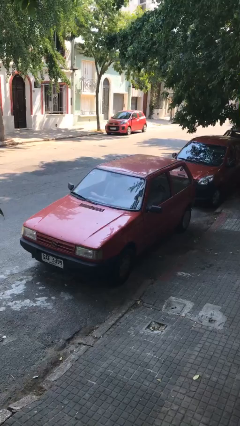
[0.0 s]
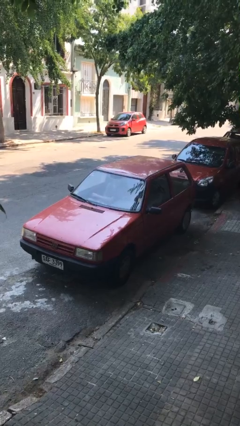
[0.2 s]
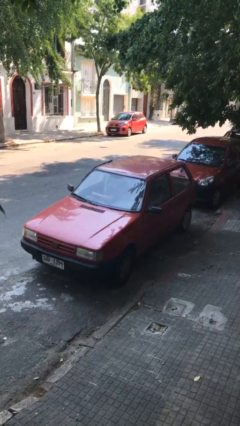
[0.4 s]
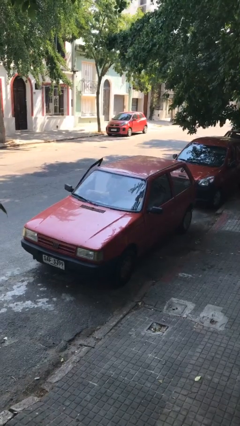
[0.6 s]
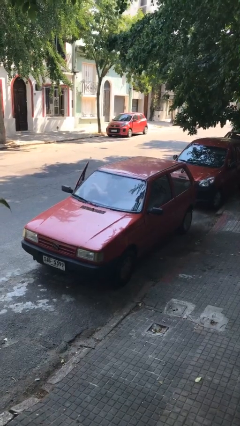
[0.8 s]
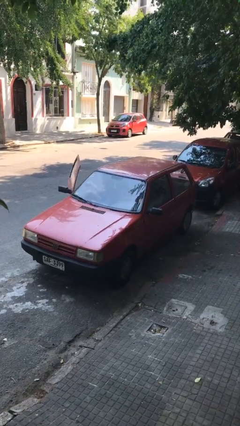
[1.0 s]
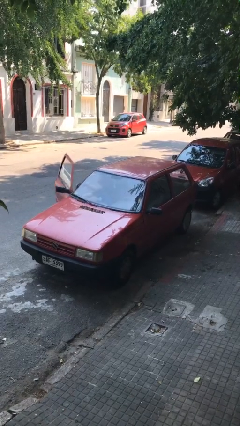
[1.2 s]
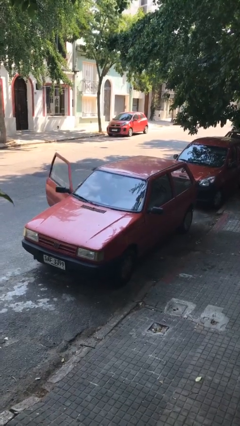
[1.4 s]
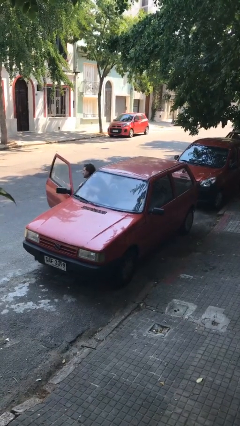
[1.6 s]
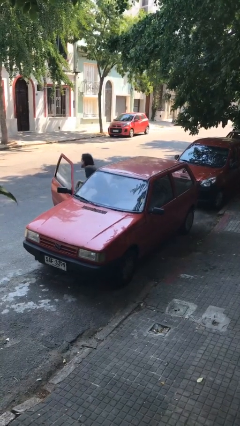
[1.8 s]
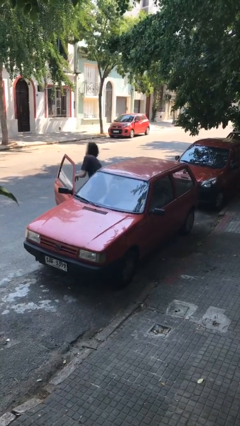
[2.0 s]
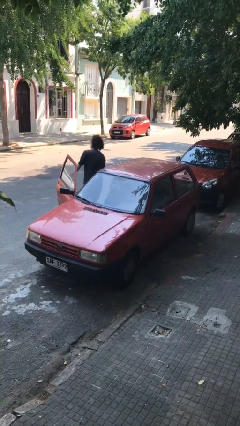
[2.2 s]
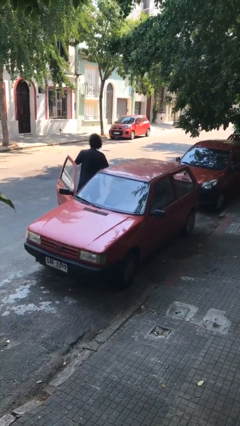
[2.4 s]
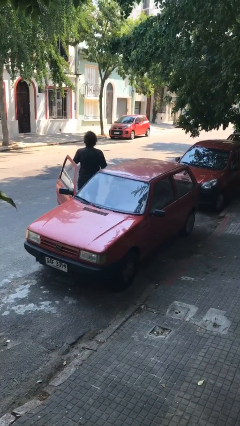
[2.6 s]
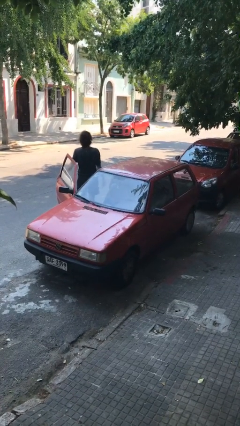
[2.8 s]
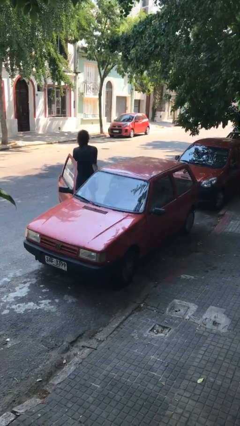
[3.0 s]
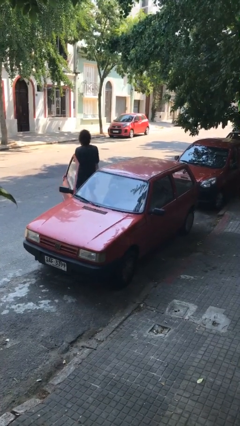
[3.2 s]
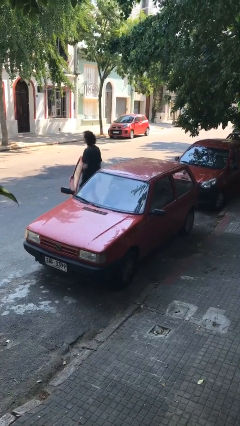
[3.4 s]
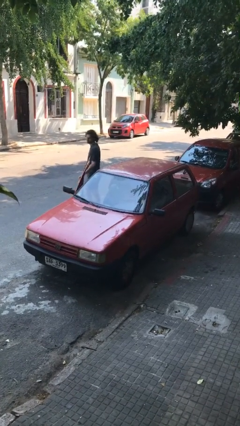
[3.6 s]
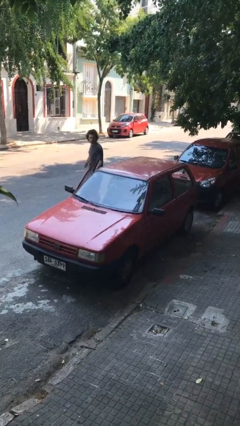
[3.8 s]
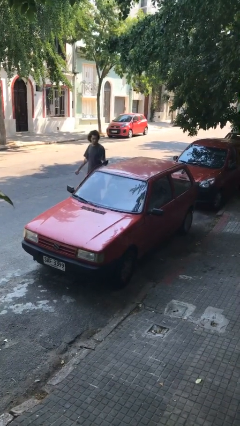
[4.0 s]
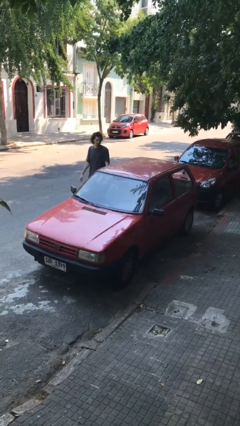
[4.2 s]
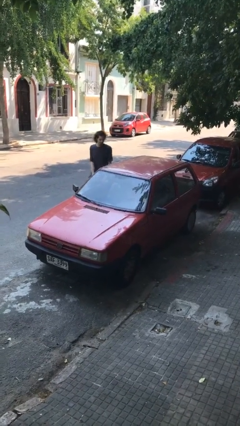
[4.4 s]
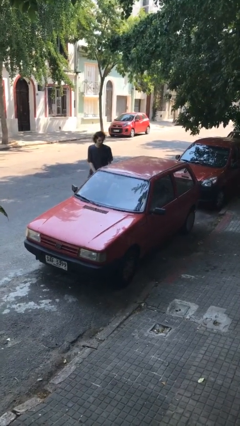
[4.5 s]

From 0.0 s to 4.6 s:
car drops off person

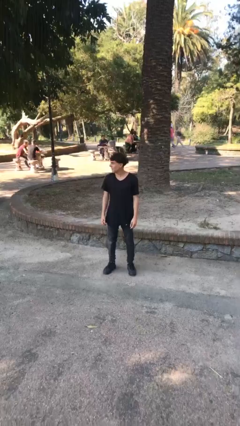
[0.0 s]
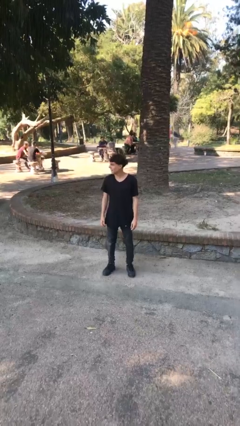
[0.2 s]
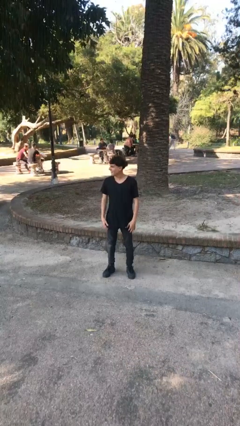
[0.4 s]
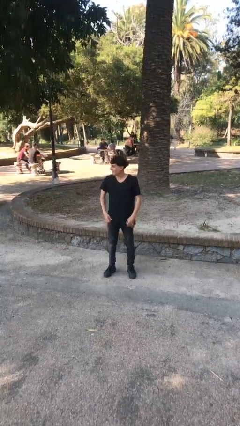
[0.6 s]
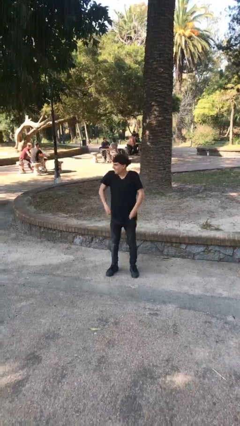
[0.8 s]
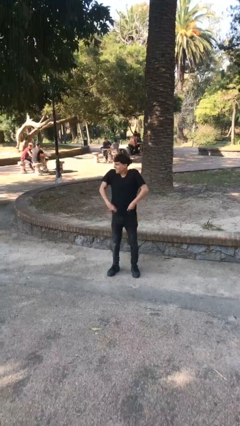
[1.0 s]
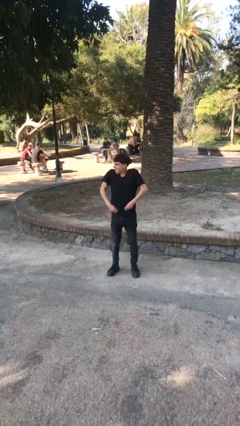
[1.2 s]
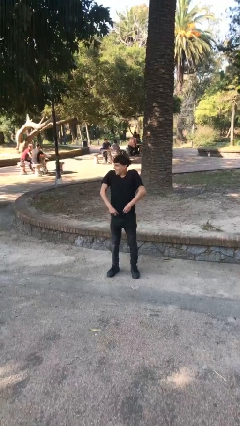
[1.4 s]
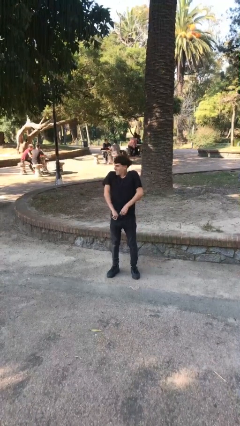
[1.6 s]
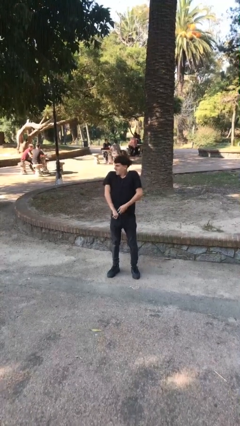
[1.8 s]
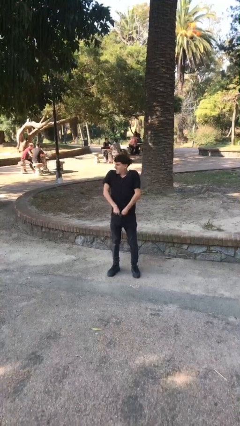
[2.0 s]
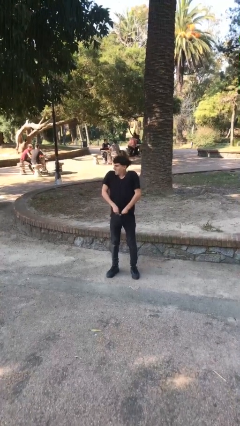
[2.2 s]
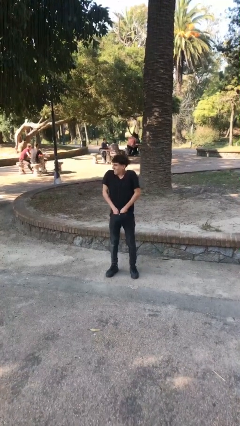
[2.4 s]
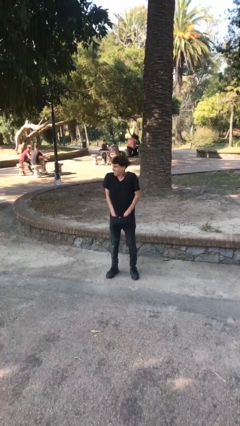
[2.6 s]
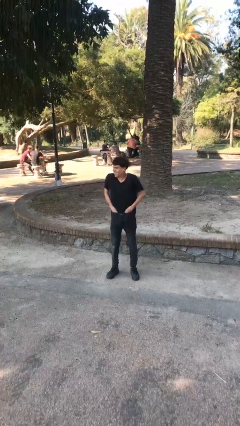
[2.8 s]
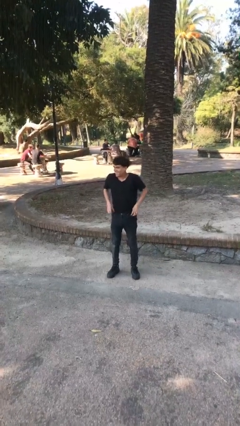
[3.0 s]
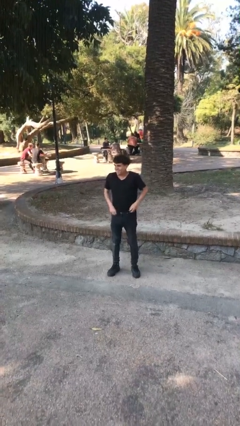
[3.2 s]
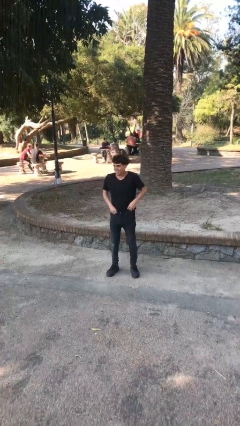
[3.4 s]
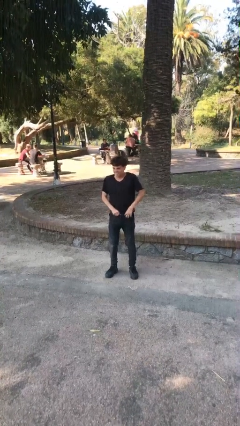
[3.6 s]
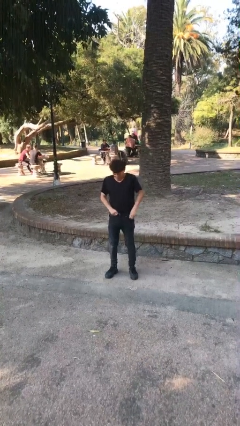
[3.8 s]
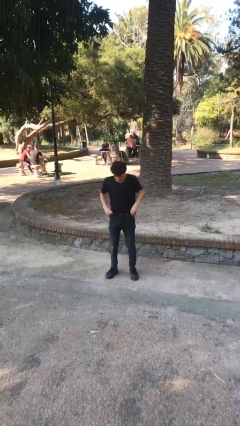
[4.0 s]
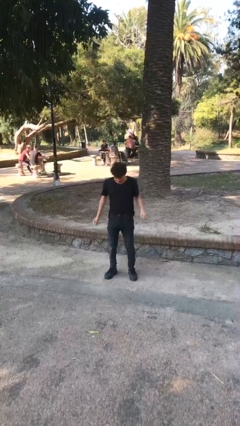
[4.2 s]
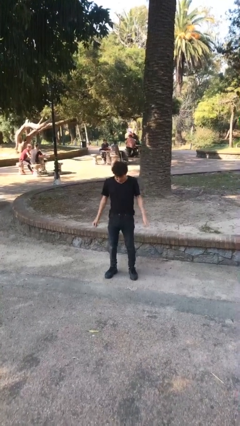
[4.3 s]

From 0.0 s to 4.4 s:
person tucks in shirt

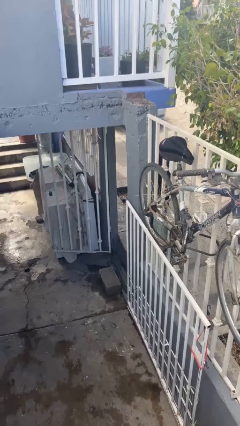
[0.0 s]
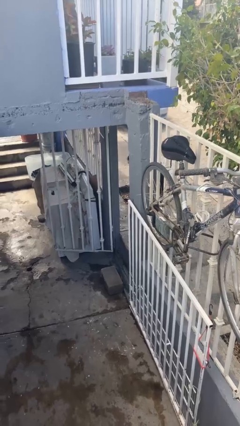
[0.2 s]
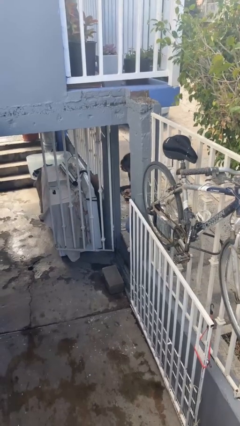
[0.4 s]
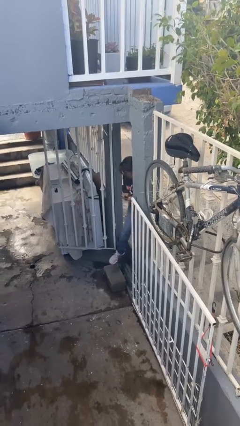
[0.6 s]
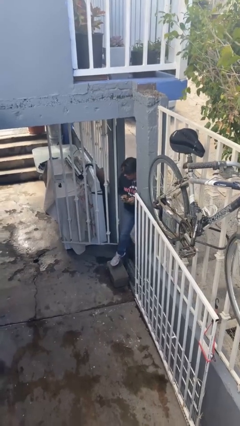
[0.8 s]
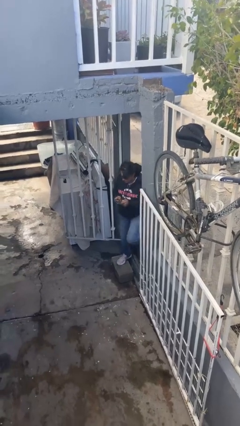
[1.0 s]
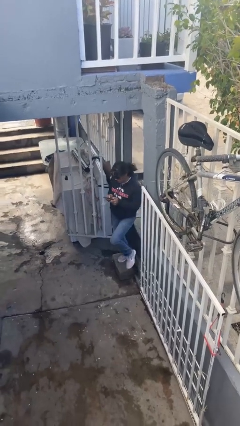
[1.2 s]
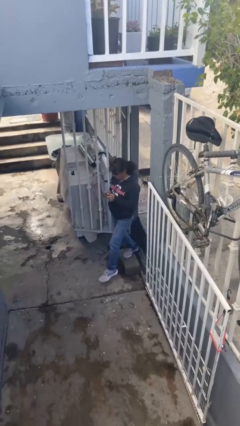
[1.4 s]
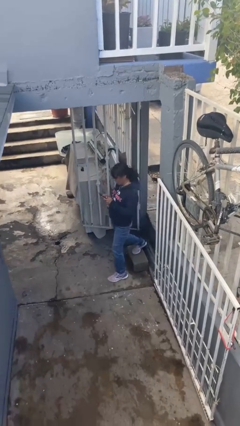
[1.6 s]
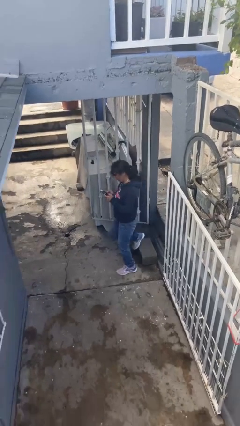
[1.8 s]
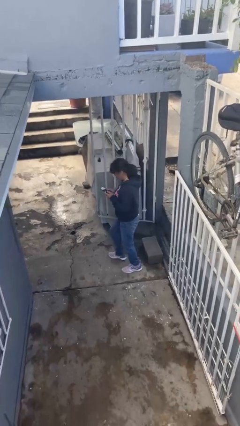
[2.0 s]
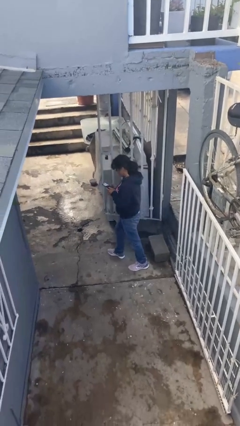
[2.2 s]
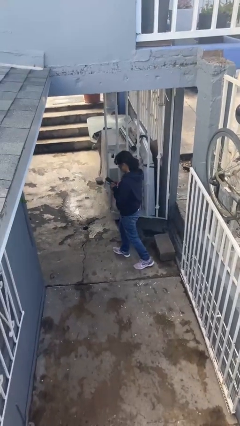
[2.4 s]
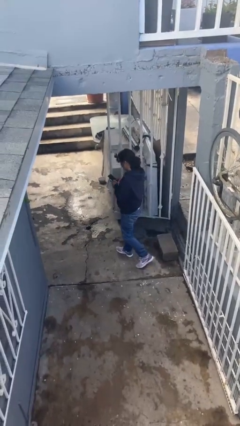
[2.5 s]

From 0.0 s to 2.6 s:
person enters scene through structure

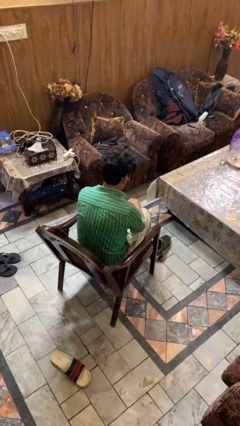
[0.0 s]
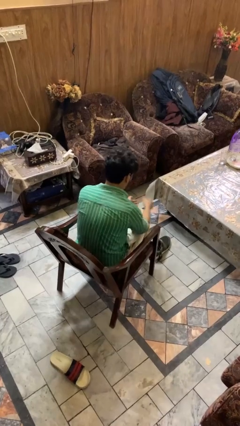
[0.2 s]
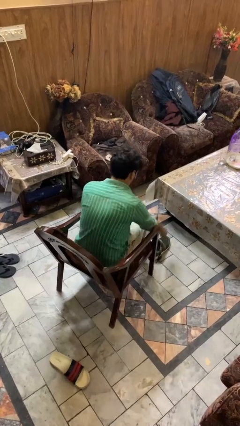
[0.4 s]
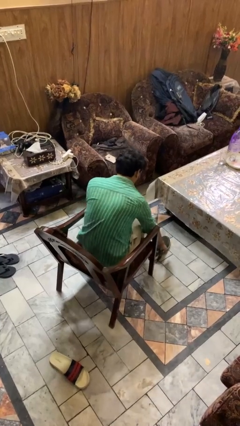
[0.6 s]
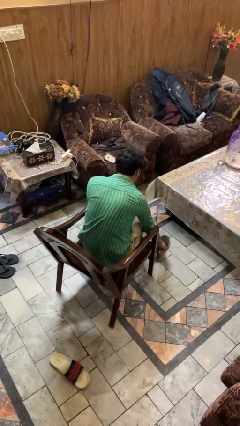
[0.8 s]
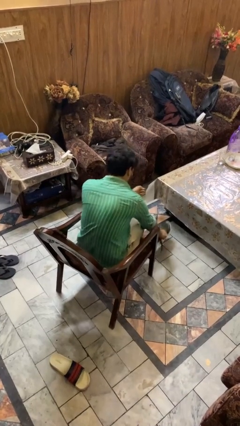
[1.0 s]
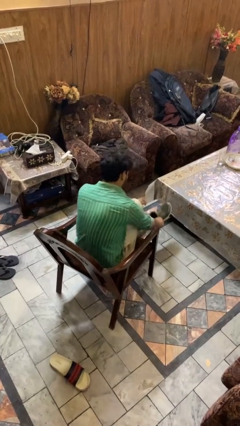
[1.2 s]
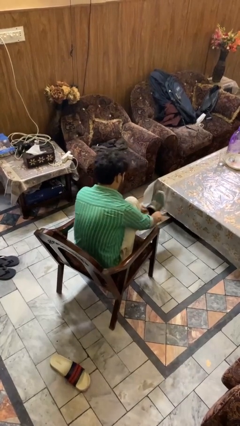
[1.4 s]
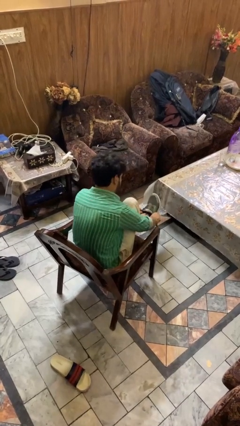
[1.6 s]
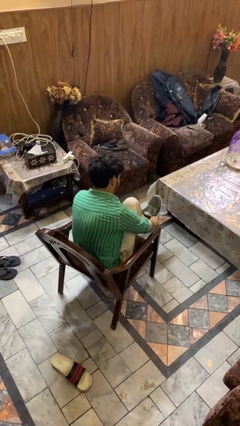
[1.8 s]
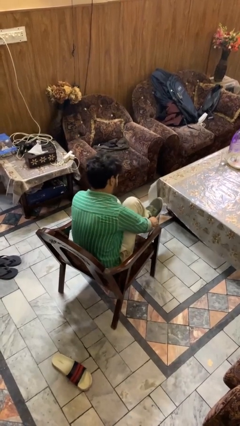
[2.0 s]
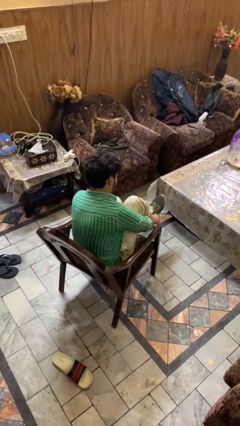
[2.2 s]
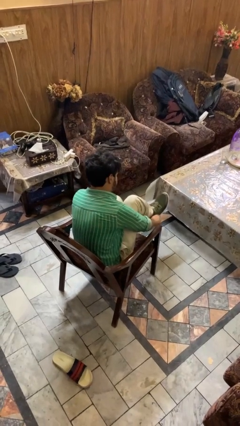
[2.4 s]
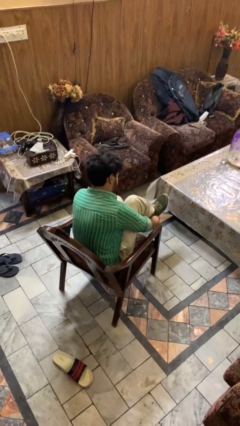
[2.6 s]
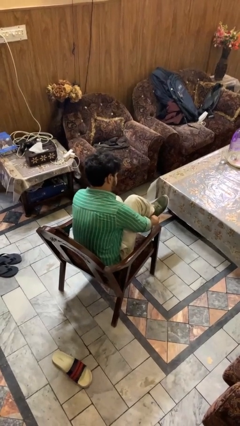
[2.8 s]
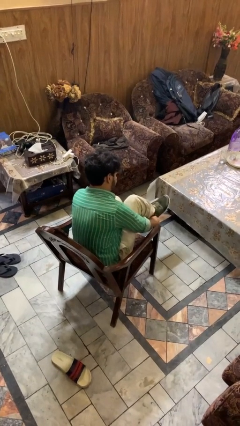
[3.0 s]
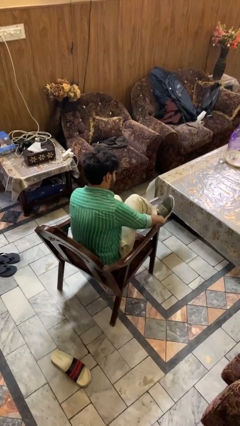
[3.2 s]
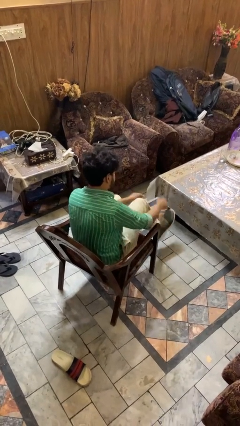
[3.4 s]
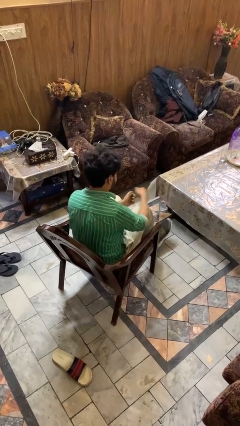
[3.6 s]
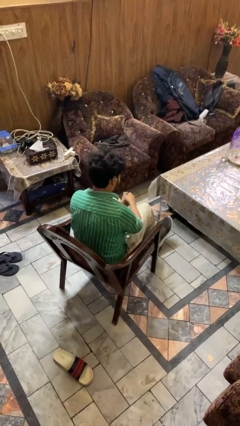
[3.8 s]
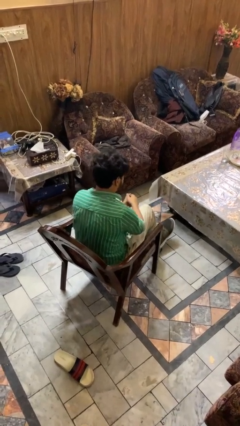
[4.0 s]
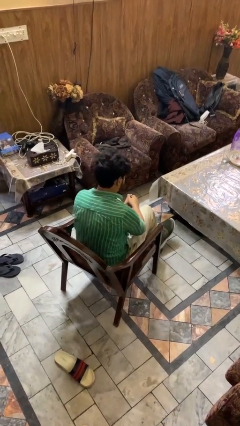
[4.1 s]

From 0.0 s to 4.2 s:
person puts on shoes

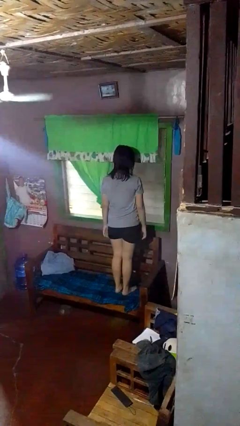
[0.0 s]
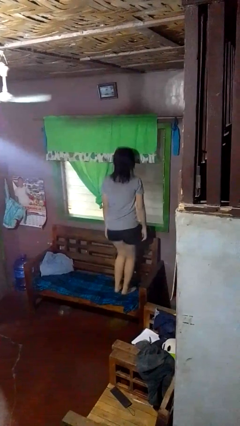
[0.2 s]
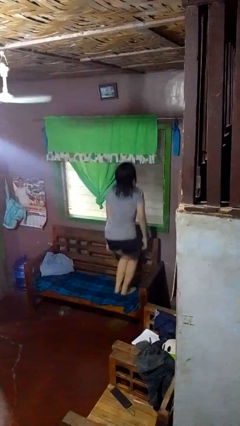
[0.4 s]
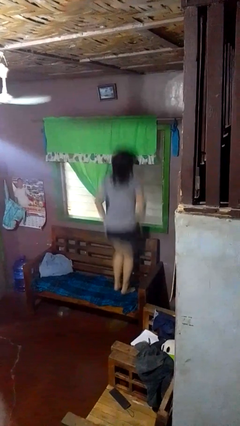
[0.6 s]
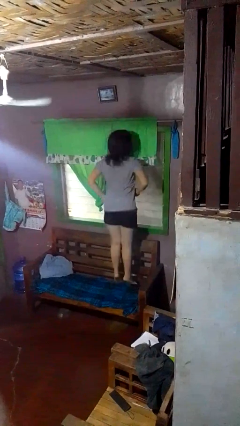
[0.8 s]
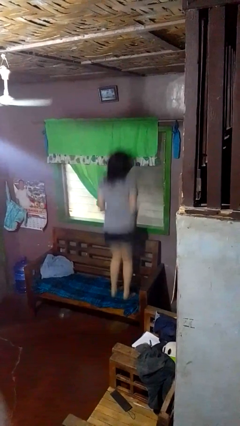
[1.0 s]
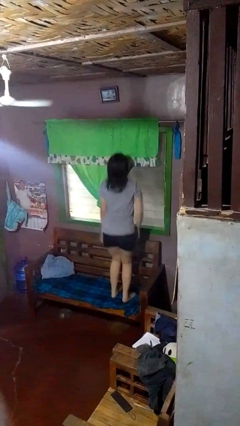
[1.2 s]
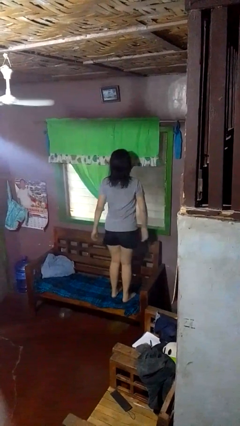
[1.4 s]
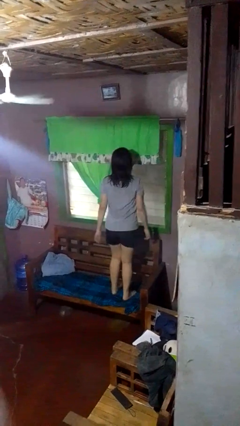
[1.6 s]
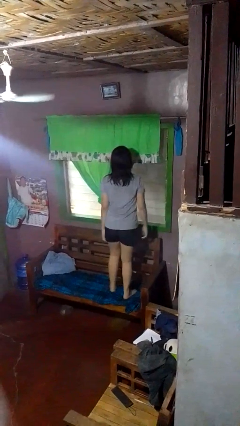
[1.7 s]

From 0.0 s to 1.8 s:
person jumps on couch

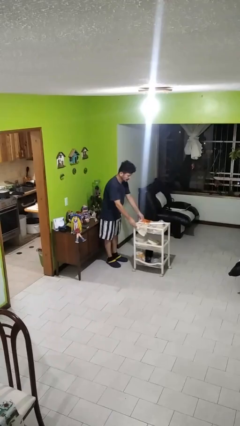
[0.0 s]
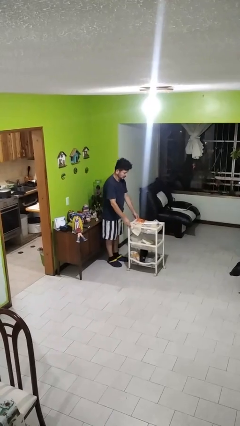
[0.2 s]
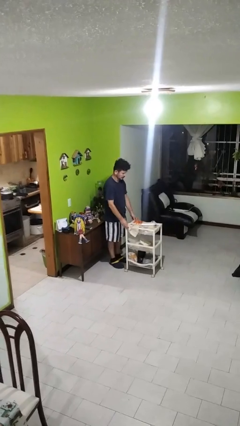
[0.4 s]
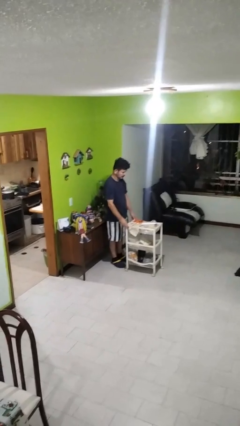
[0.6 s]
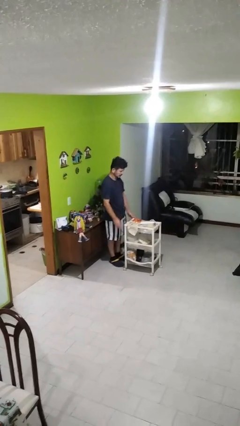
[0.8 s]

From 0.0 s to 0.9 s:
person pulls wheeled cart
